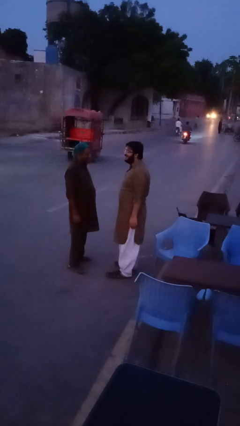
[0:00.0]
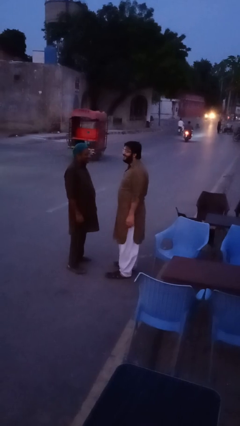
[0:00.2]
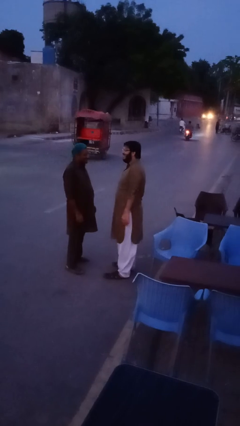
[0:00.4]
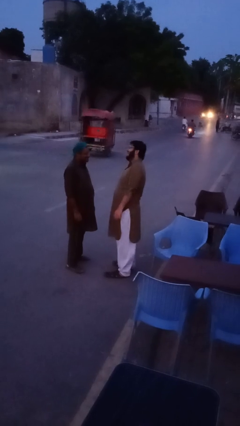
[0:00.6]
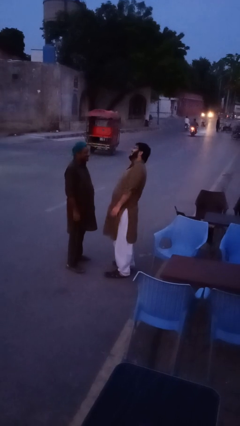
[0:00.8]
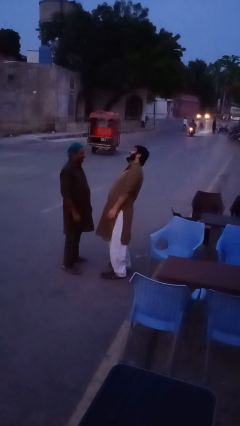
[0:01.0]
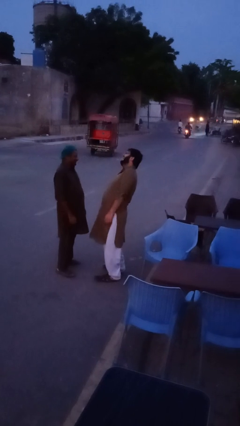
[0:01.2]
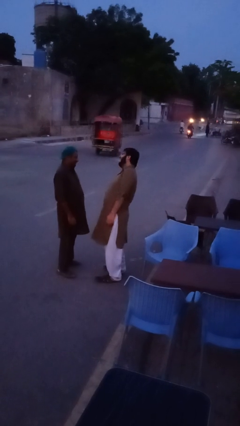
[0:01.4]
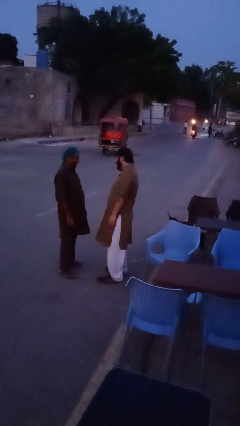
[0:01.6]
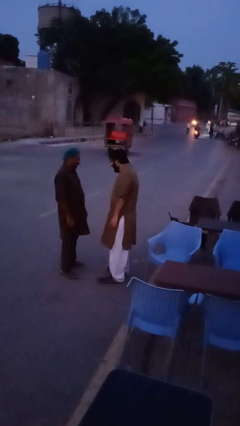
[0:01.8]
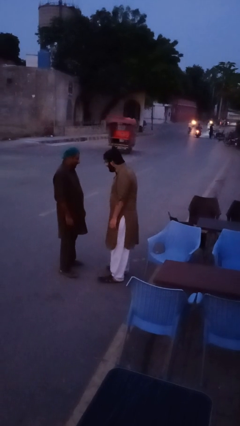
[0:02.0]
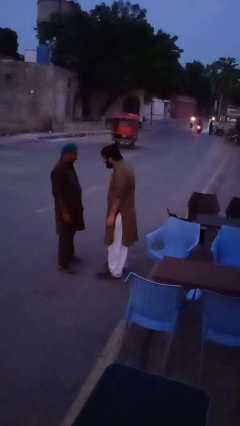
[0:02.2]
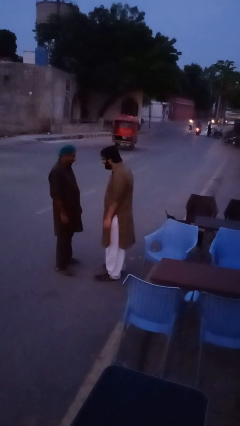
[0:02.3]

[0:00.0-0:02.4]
person laughs with person

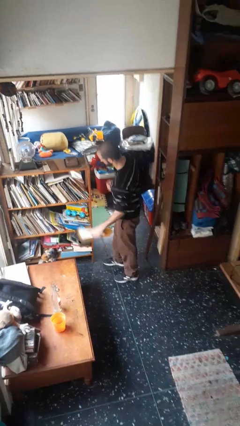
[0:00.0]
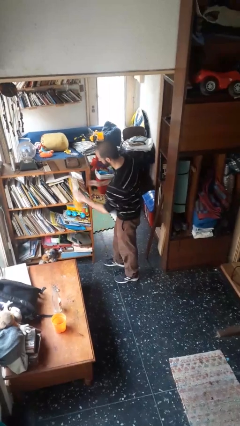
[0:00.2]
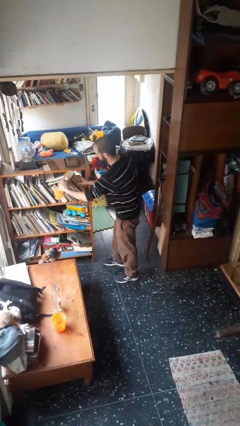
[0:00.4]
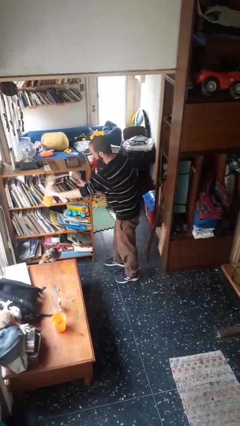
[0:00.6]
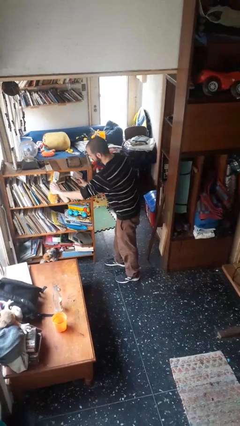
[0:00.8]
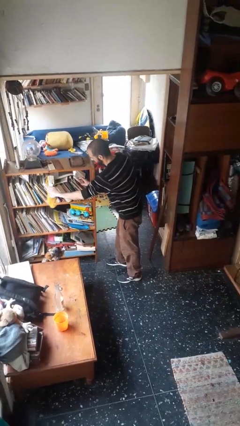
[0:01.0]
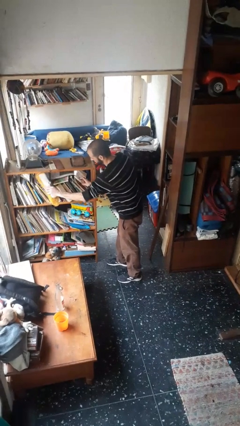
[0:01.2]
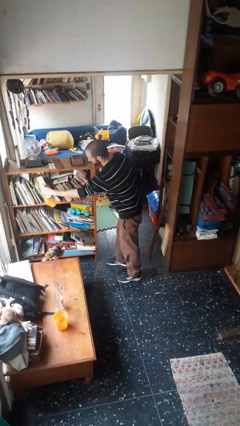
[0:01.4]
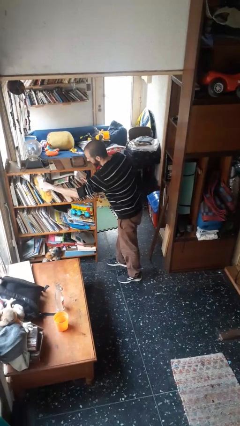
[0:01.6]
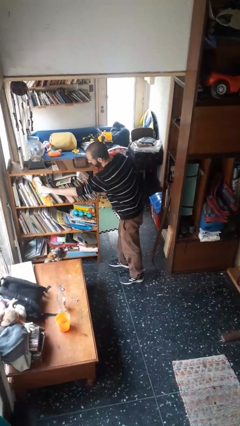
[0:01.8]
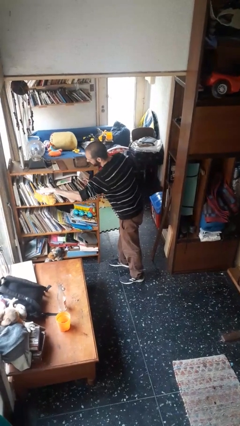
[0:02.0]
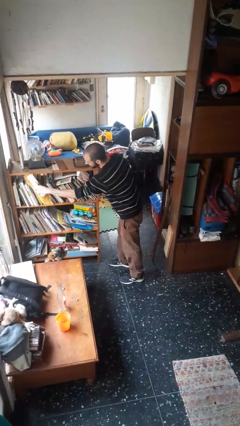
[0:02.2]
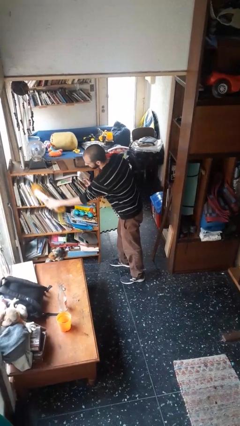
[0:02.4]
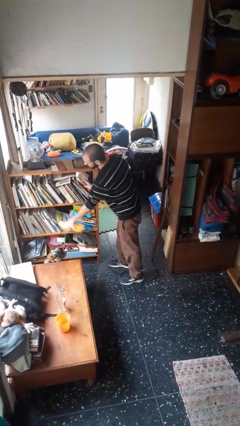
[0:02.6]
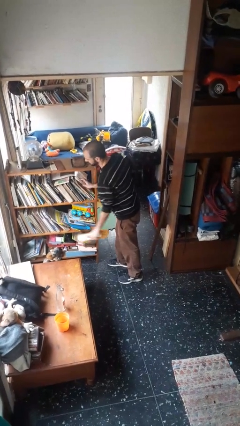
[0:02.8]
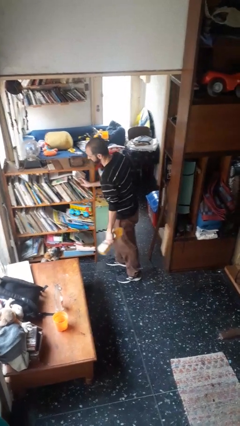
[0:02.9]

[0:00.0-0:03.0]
person dusts furniture

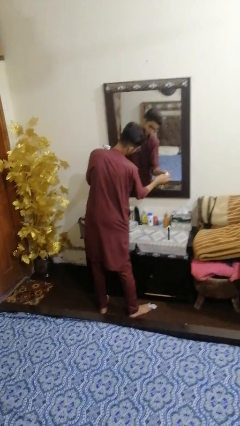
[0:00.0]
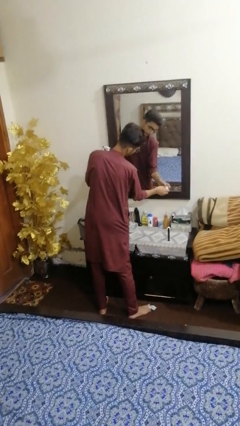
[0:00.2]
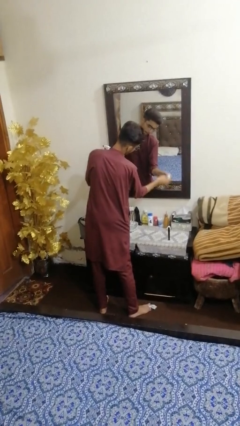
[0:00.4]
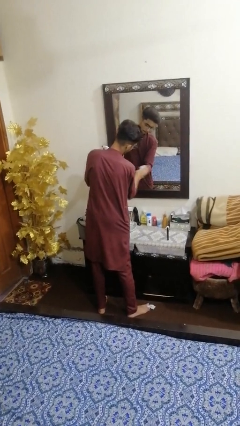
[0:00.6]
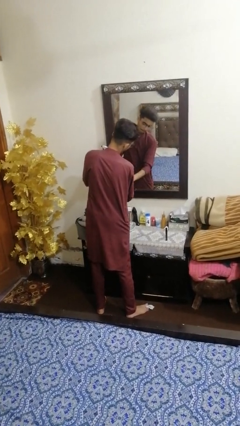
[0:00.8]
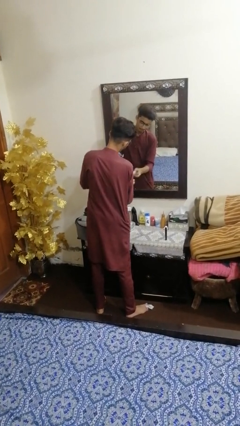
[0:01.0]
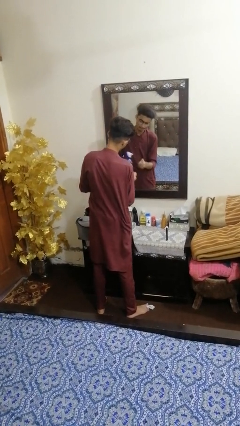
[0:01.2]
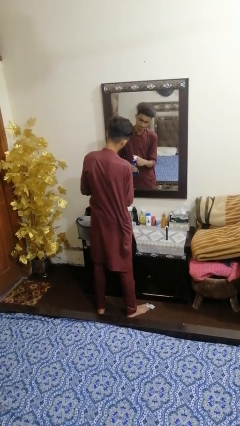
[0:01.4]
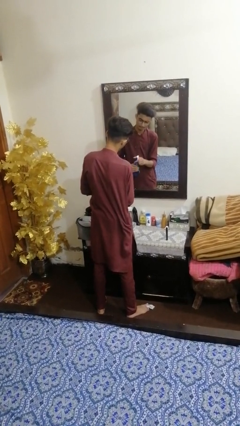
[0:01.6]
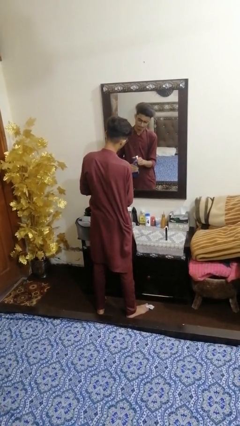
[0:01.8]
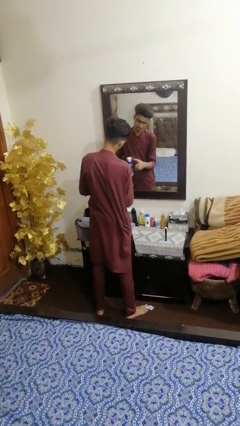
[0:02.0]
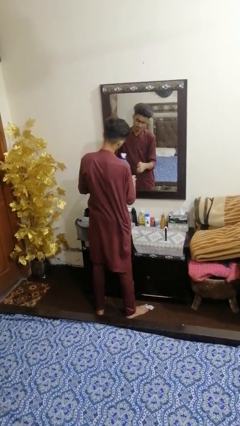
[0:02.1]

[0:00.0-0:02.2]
person sprays from bottle

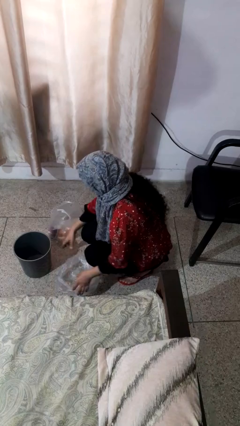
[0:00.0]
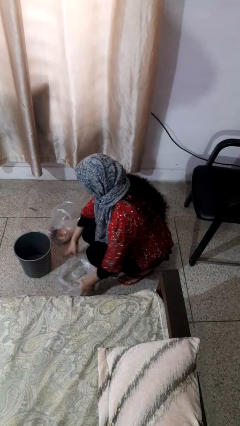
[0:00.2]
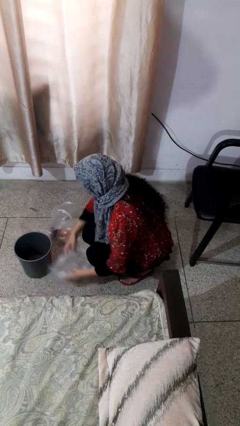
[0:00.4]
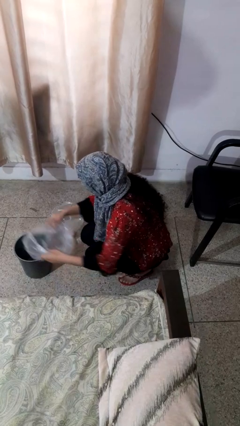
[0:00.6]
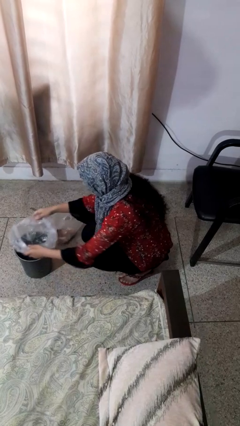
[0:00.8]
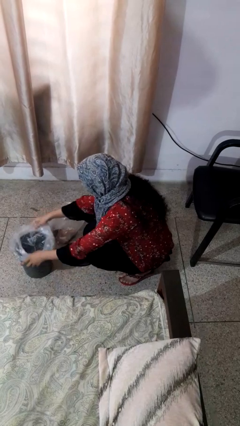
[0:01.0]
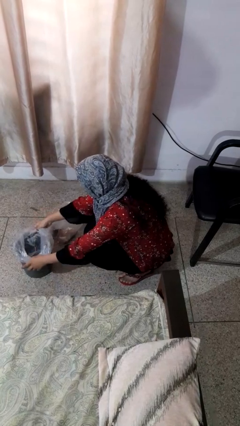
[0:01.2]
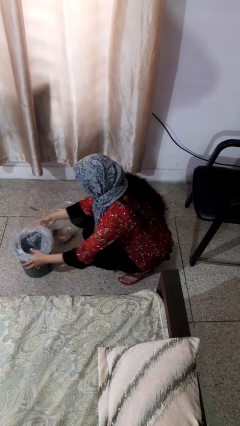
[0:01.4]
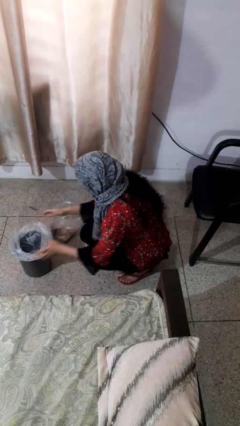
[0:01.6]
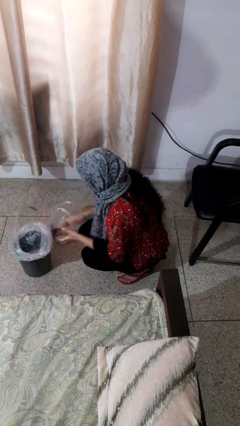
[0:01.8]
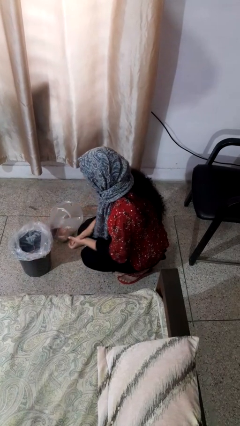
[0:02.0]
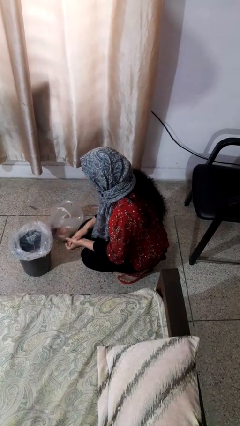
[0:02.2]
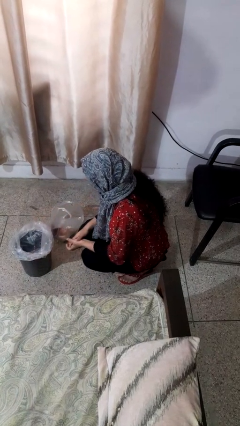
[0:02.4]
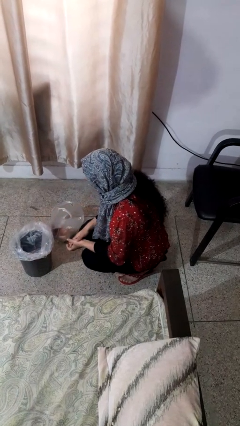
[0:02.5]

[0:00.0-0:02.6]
person inserts trashbag into trashcan

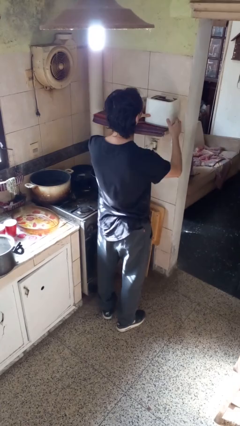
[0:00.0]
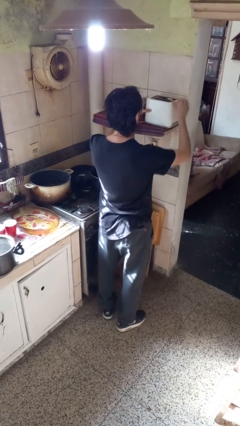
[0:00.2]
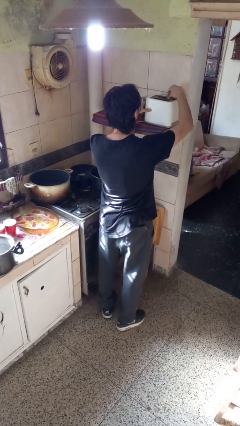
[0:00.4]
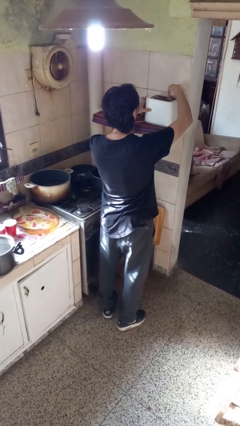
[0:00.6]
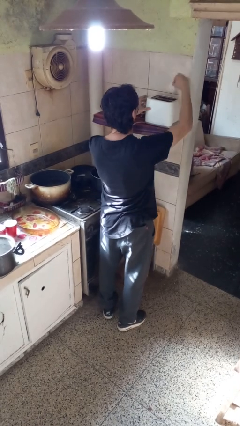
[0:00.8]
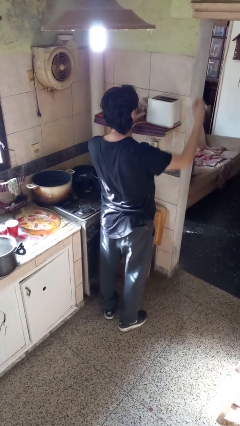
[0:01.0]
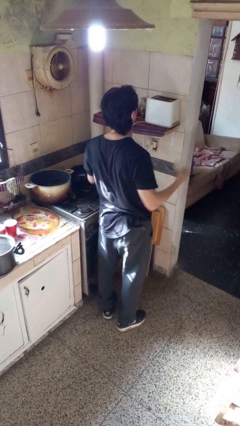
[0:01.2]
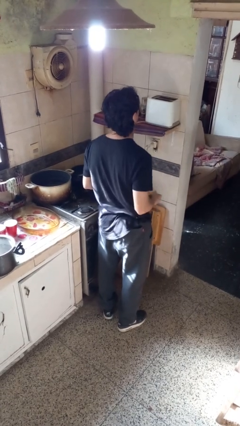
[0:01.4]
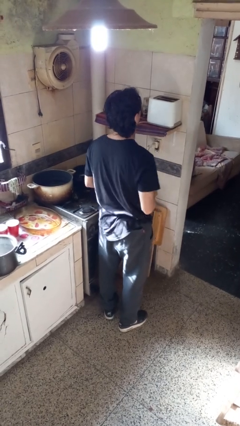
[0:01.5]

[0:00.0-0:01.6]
person takes object from toaster

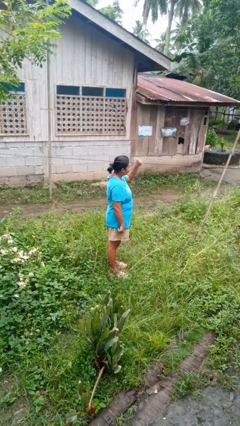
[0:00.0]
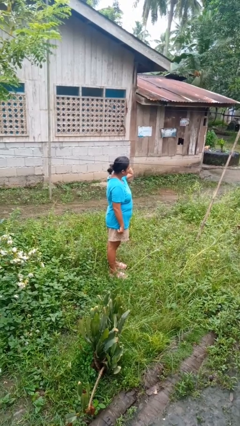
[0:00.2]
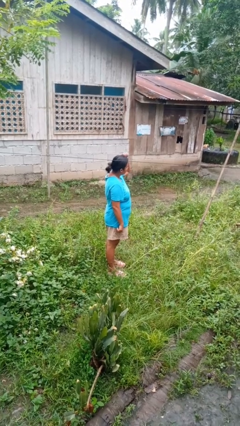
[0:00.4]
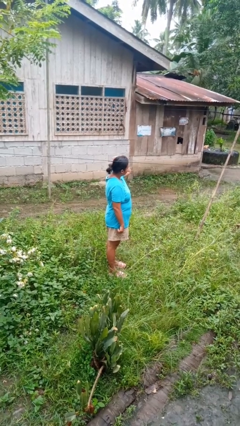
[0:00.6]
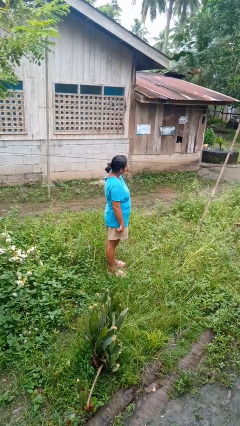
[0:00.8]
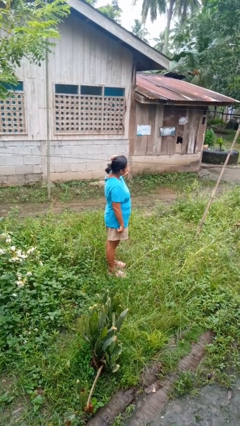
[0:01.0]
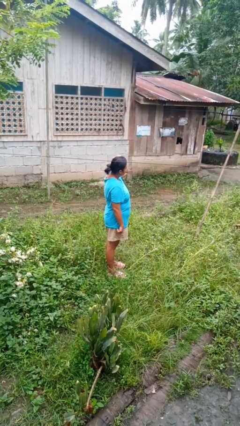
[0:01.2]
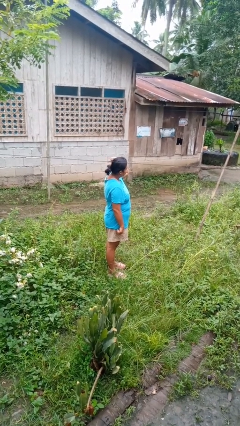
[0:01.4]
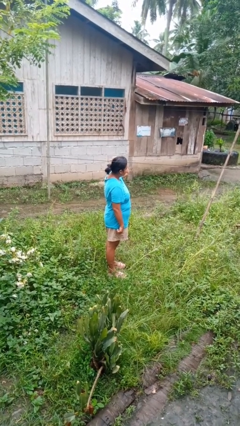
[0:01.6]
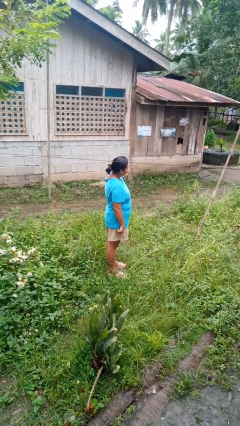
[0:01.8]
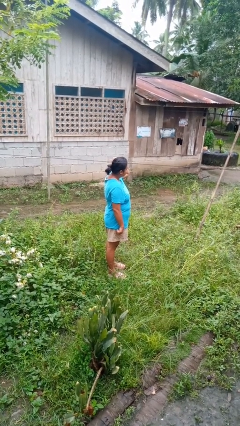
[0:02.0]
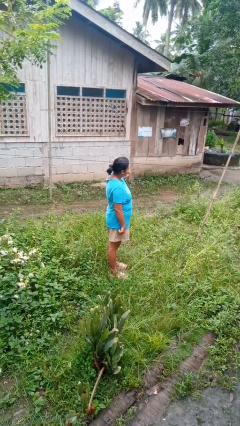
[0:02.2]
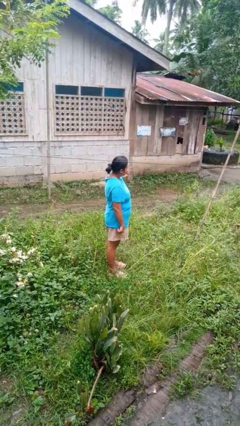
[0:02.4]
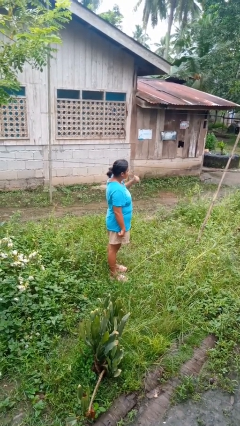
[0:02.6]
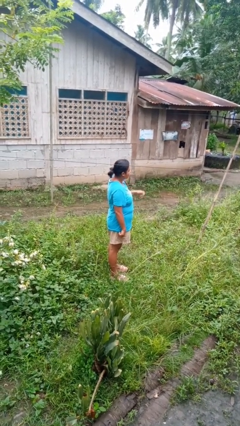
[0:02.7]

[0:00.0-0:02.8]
person gestures behind me

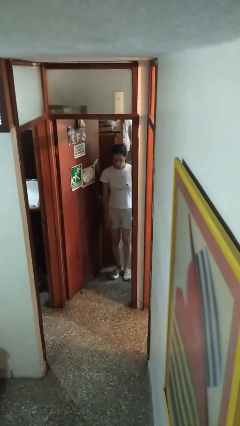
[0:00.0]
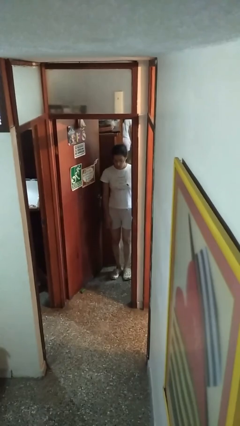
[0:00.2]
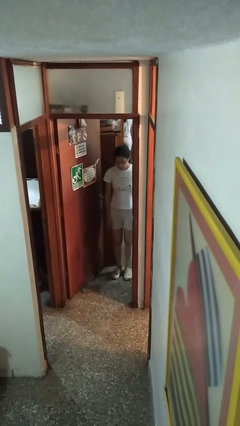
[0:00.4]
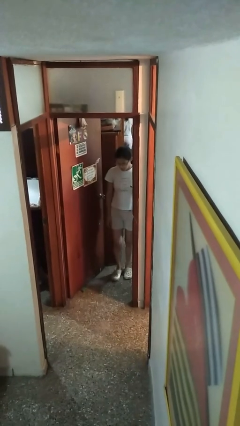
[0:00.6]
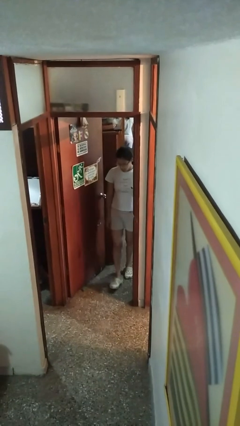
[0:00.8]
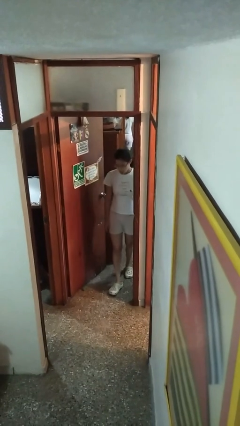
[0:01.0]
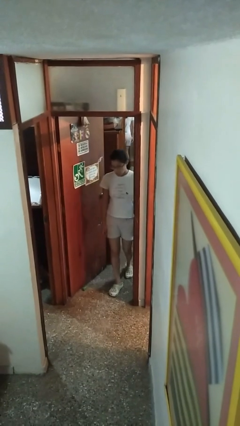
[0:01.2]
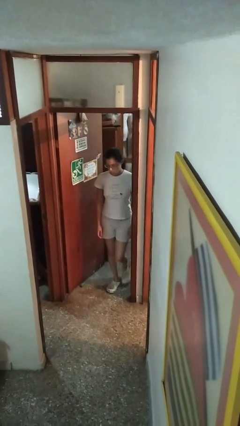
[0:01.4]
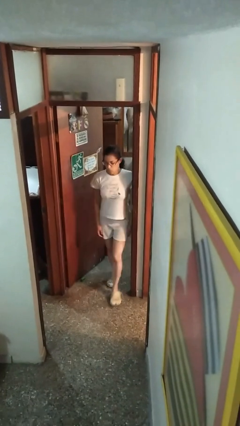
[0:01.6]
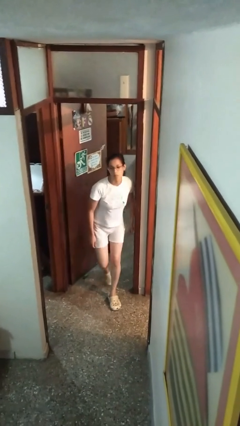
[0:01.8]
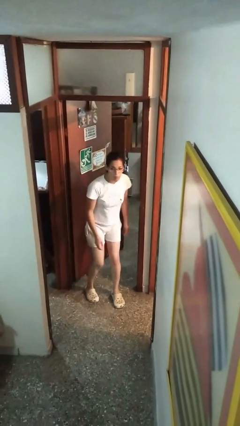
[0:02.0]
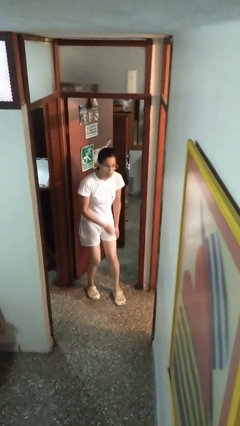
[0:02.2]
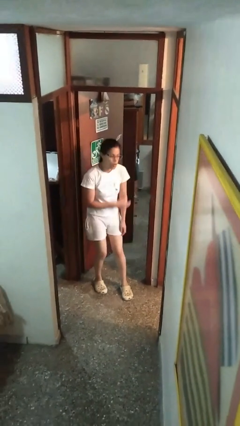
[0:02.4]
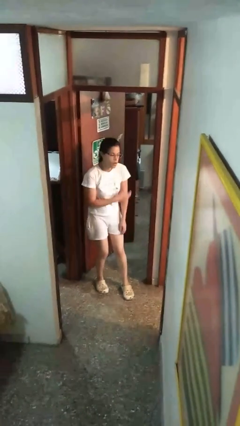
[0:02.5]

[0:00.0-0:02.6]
person bumps into wall
